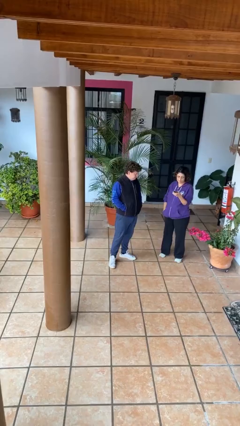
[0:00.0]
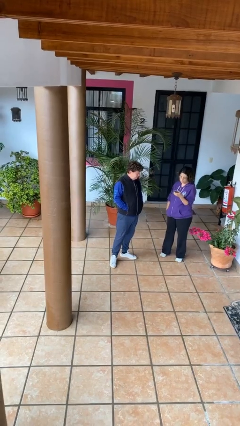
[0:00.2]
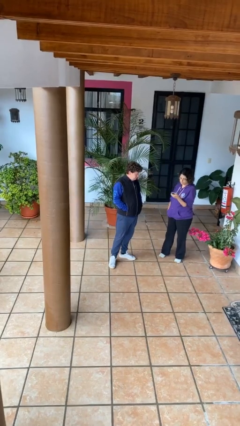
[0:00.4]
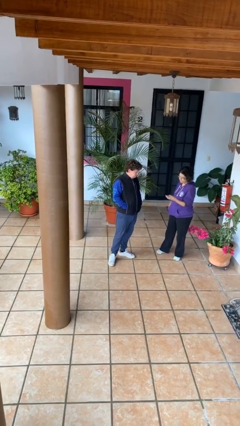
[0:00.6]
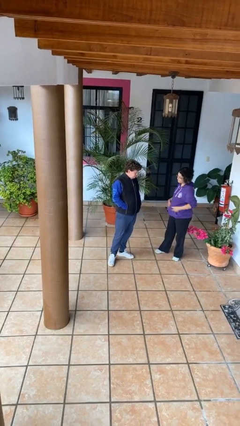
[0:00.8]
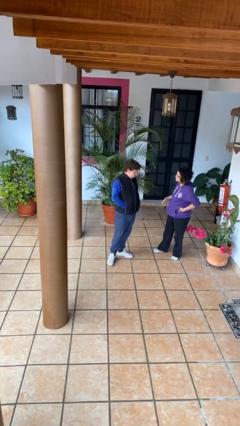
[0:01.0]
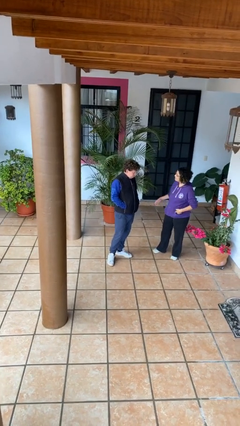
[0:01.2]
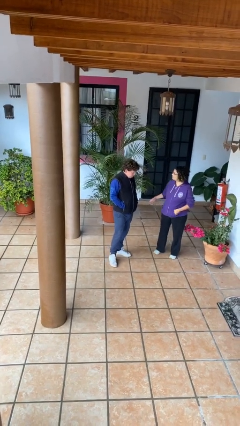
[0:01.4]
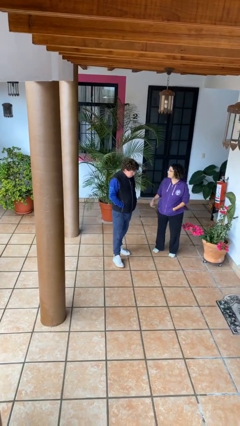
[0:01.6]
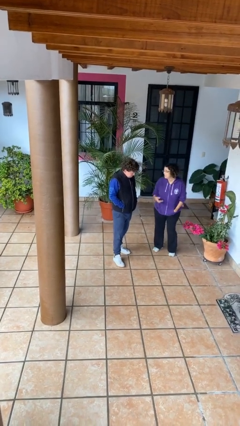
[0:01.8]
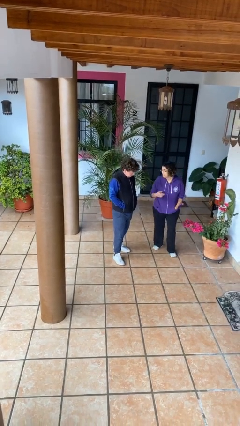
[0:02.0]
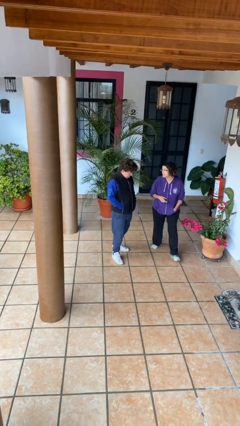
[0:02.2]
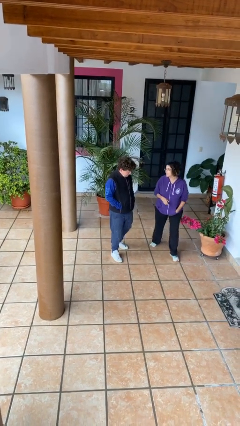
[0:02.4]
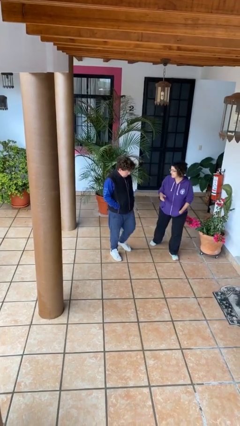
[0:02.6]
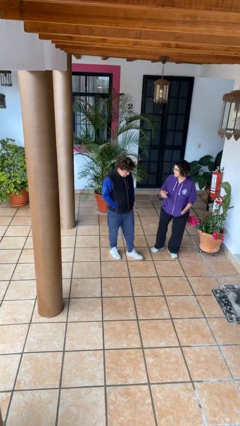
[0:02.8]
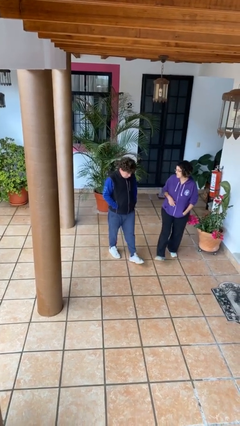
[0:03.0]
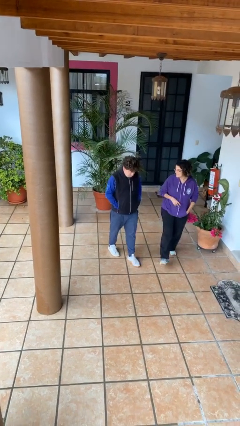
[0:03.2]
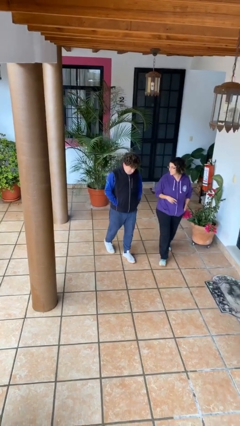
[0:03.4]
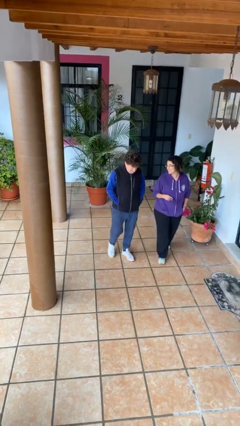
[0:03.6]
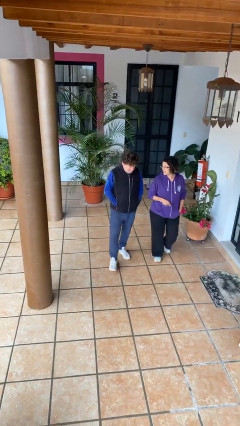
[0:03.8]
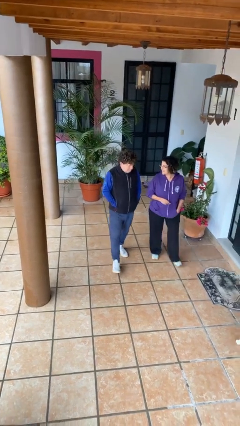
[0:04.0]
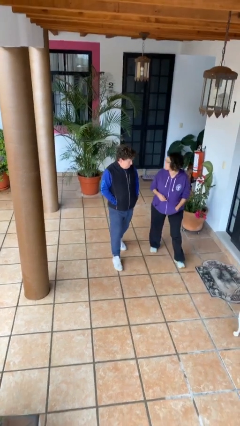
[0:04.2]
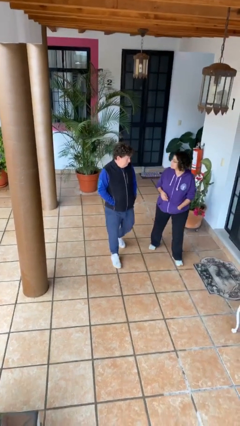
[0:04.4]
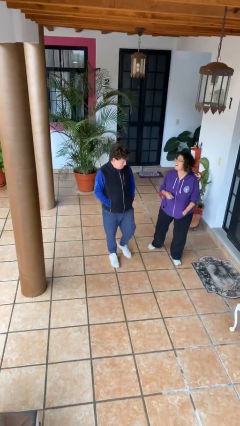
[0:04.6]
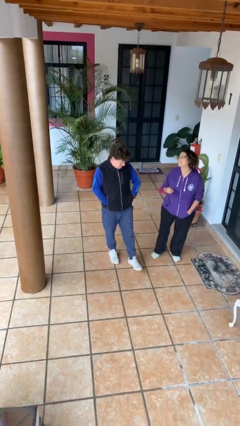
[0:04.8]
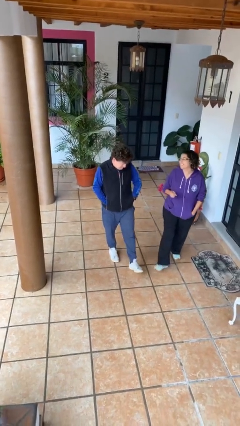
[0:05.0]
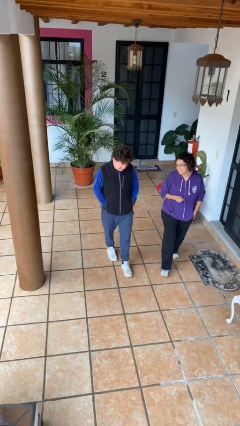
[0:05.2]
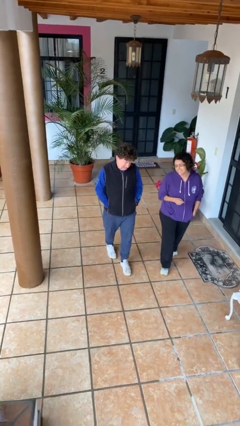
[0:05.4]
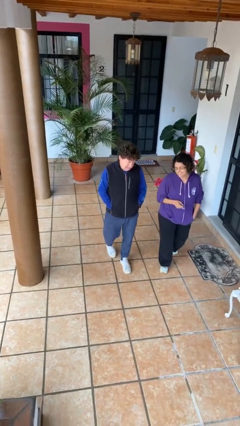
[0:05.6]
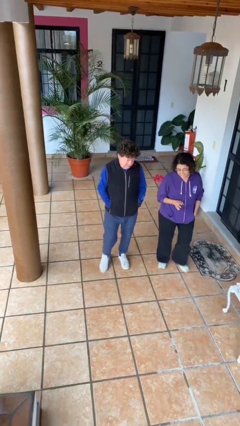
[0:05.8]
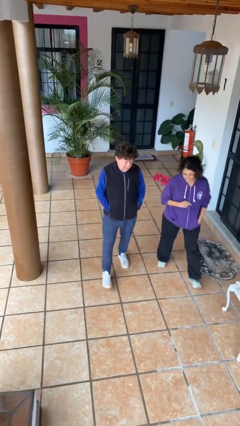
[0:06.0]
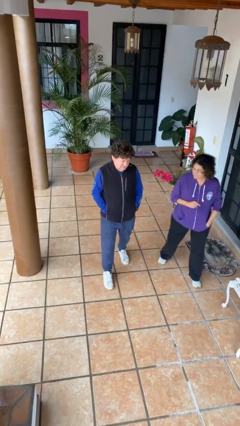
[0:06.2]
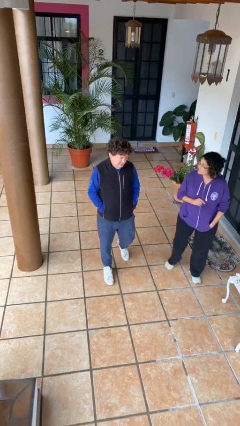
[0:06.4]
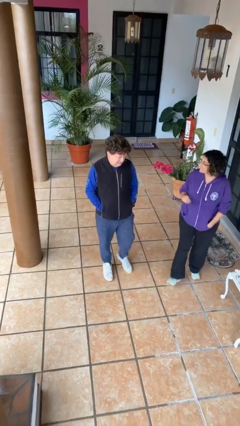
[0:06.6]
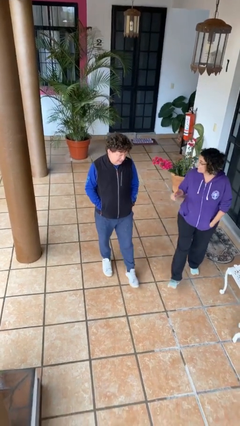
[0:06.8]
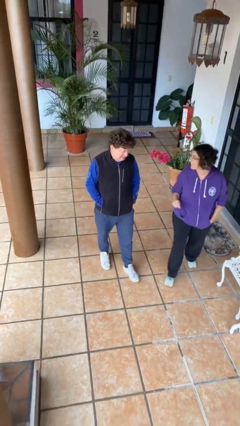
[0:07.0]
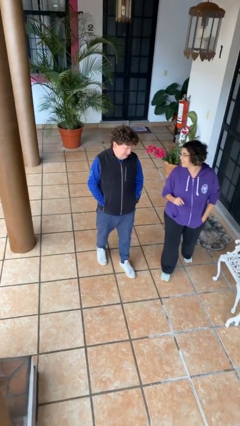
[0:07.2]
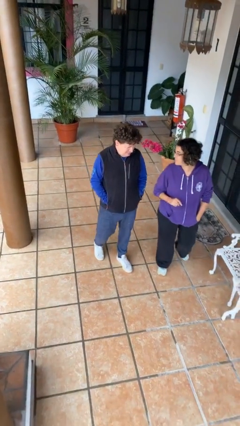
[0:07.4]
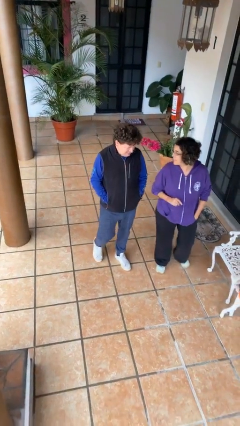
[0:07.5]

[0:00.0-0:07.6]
person talks to person

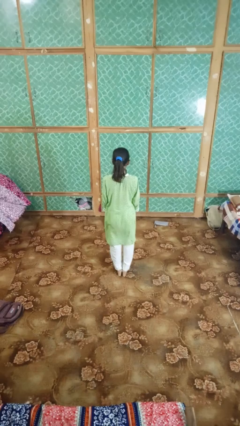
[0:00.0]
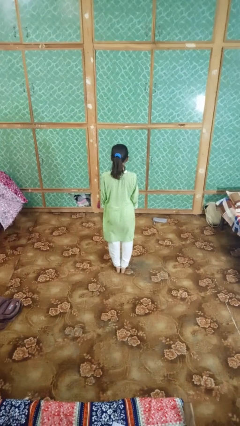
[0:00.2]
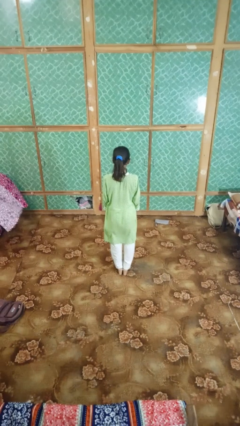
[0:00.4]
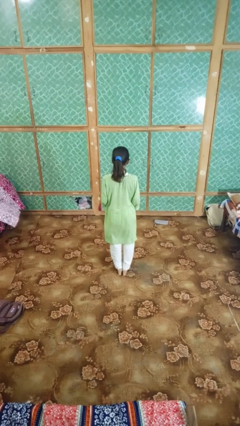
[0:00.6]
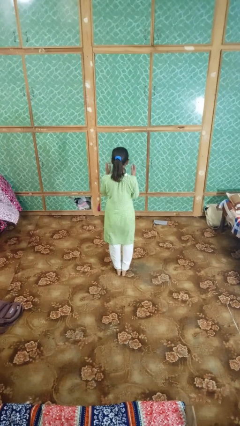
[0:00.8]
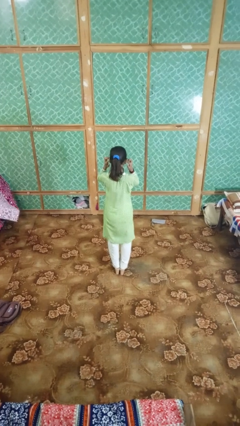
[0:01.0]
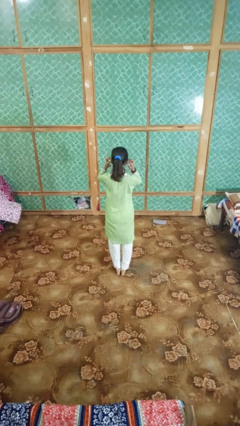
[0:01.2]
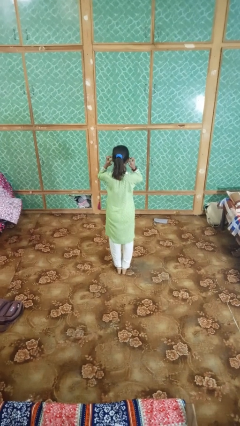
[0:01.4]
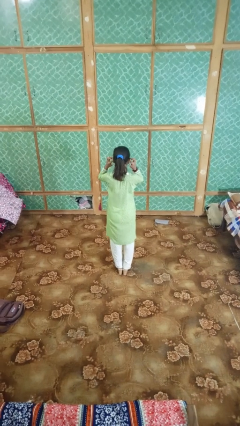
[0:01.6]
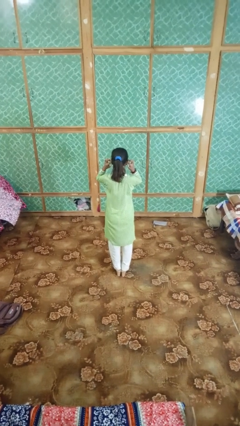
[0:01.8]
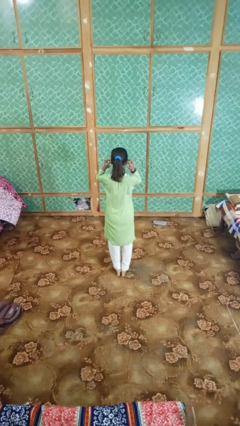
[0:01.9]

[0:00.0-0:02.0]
person puts fingers in ear

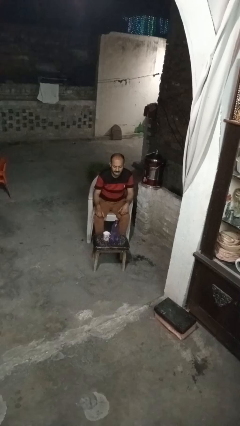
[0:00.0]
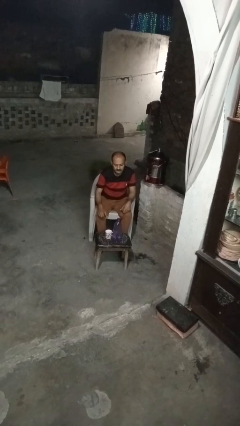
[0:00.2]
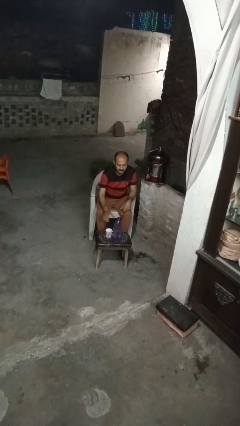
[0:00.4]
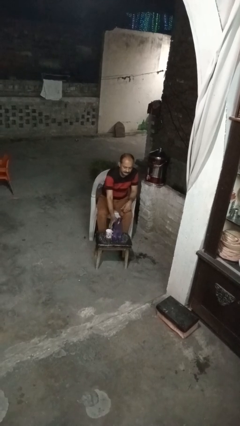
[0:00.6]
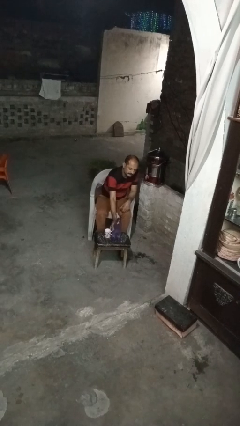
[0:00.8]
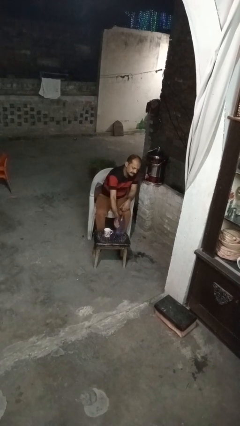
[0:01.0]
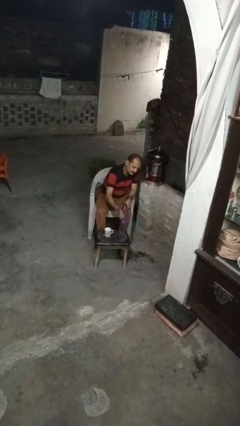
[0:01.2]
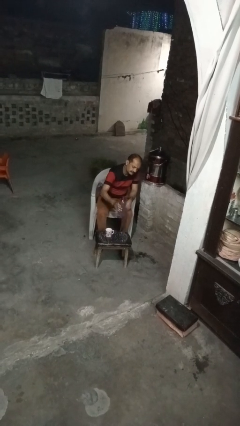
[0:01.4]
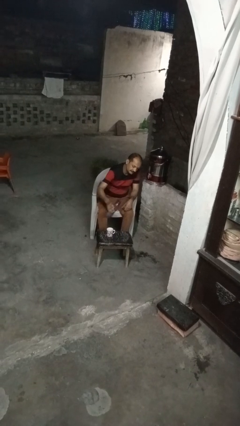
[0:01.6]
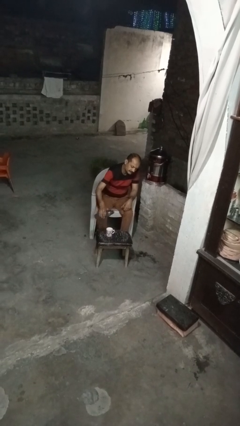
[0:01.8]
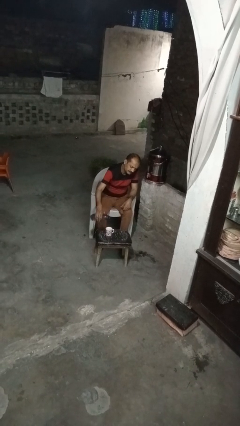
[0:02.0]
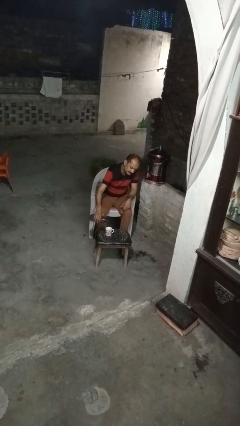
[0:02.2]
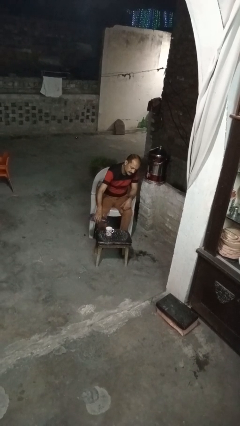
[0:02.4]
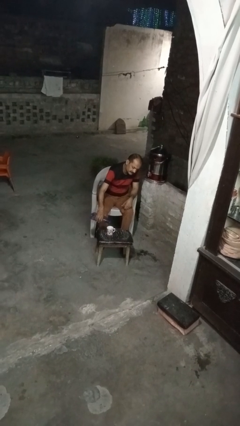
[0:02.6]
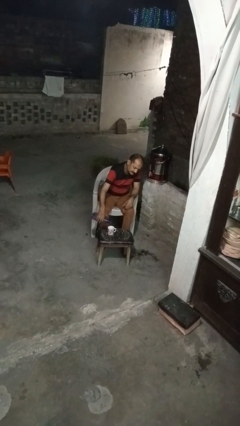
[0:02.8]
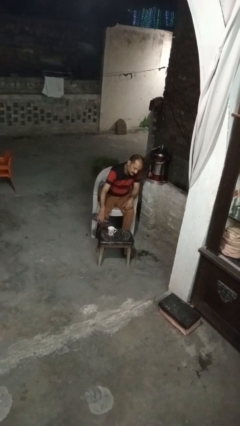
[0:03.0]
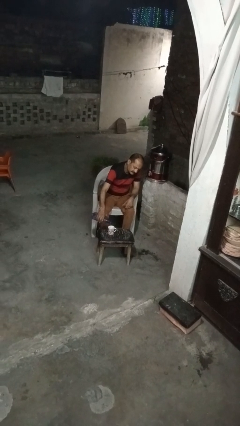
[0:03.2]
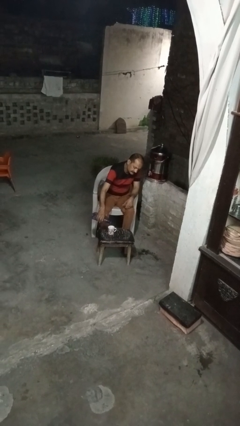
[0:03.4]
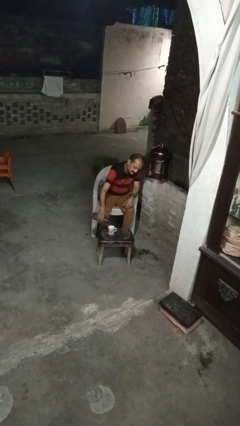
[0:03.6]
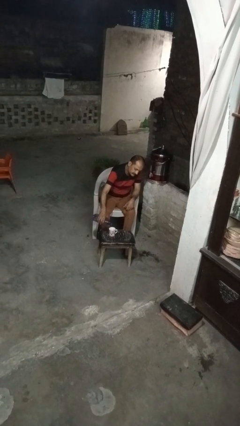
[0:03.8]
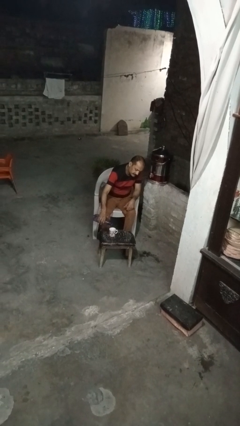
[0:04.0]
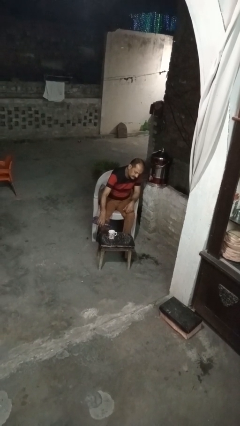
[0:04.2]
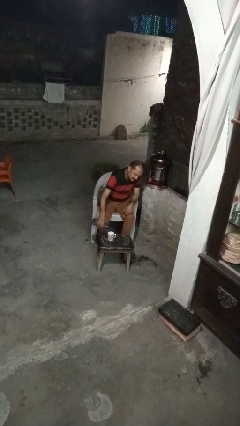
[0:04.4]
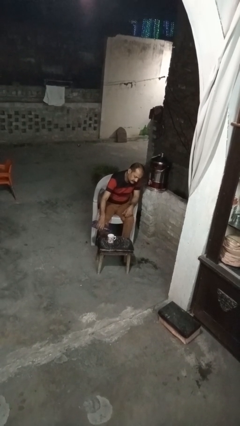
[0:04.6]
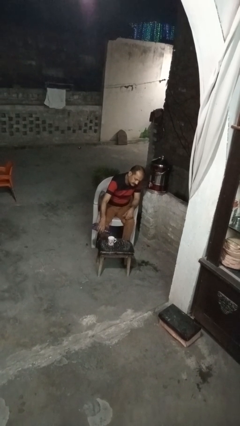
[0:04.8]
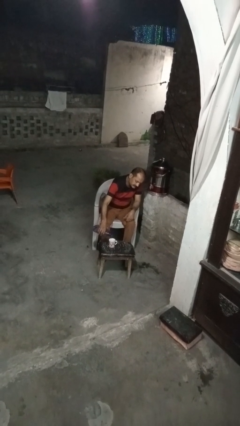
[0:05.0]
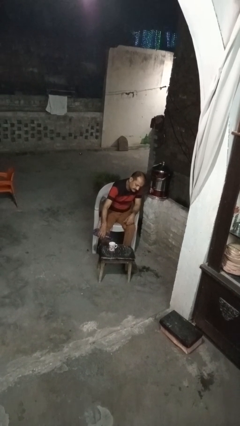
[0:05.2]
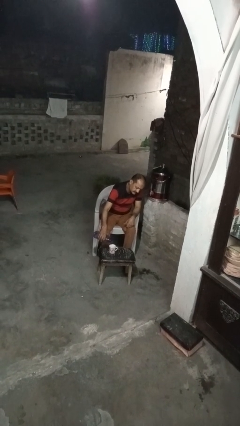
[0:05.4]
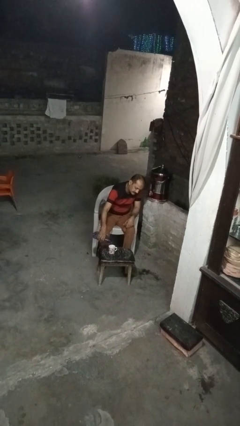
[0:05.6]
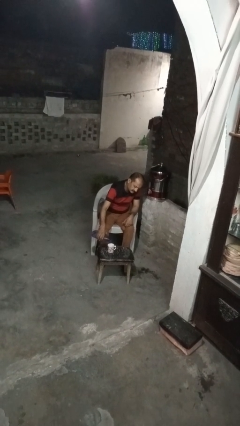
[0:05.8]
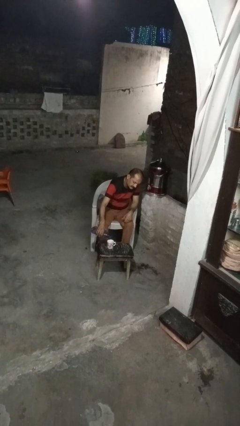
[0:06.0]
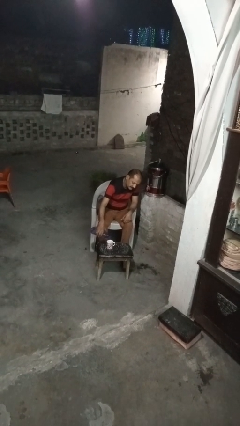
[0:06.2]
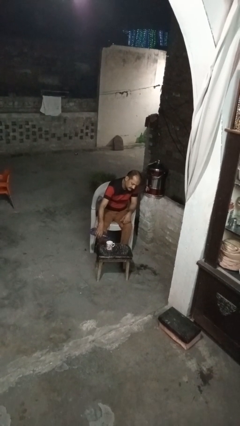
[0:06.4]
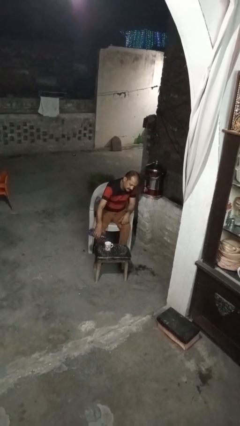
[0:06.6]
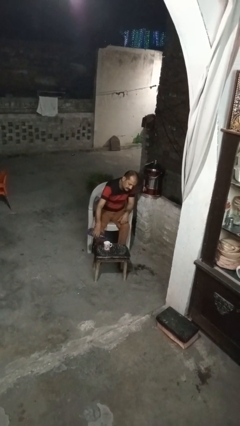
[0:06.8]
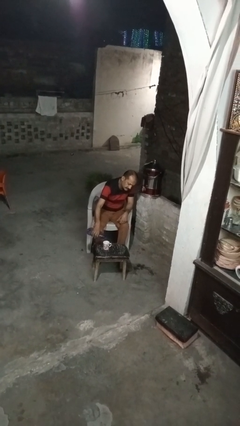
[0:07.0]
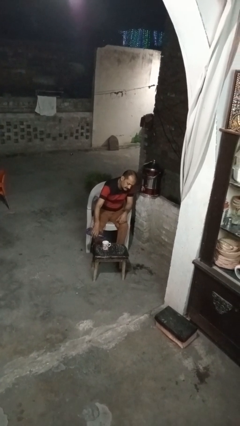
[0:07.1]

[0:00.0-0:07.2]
person pours liquid into cup

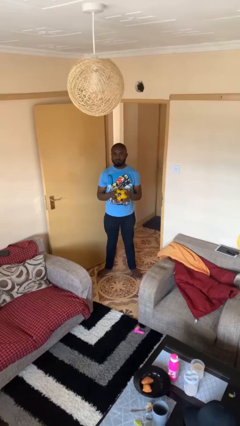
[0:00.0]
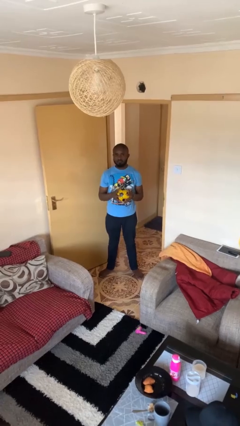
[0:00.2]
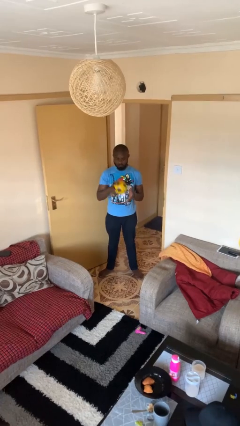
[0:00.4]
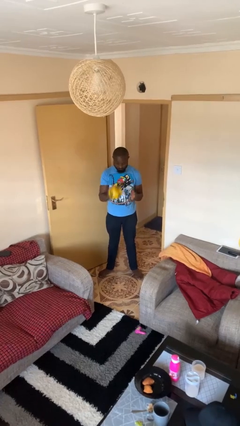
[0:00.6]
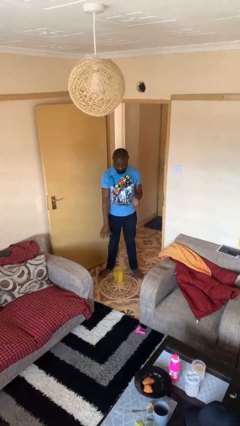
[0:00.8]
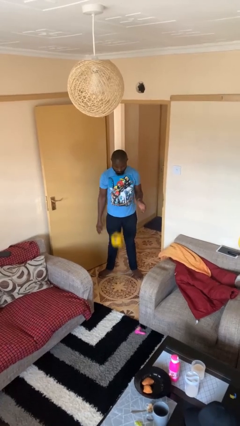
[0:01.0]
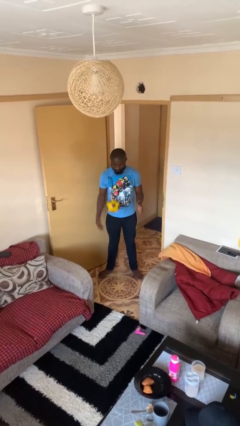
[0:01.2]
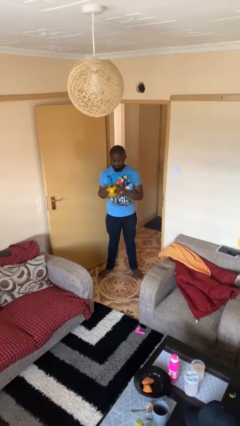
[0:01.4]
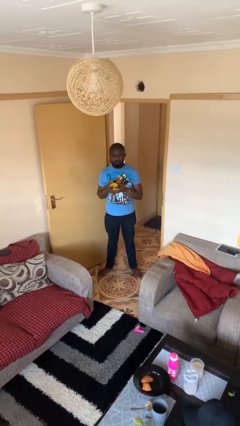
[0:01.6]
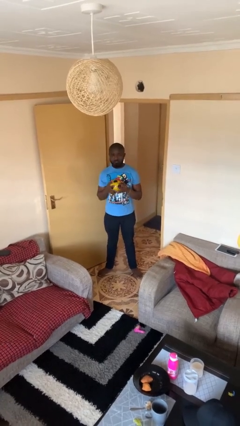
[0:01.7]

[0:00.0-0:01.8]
person bounces ball on floor
